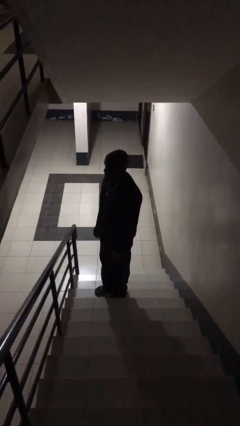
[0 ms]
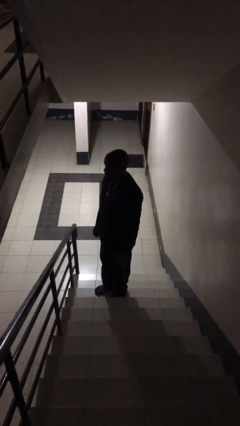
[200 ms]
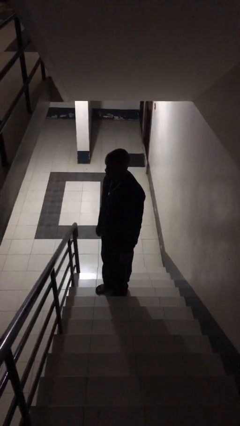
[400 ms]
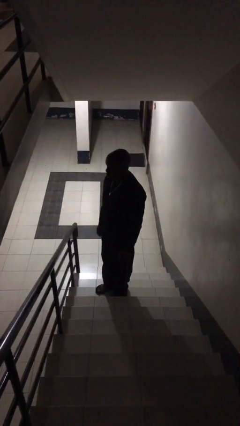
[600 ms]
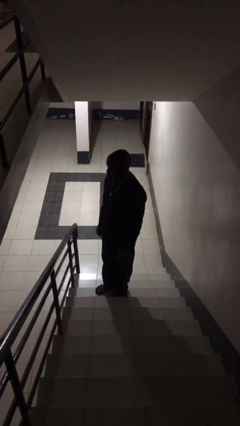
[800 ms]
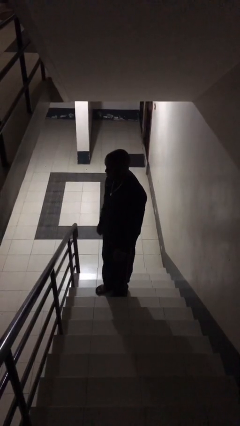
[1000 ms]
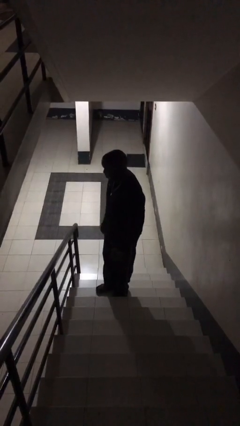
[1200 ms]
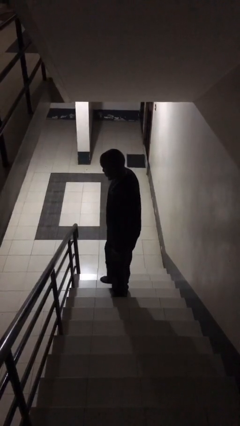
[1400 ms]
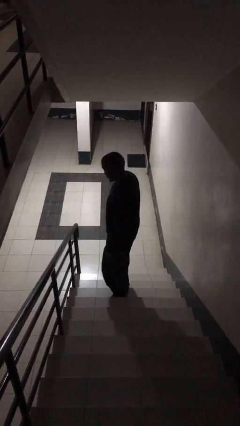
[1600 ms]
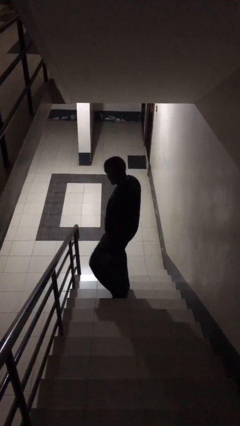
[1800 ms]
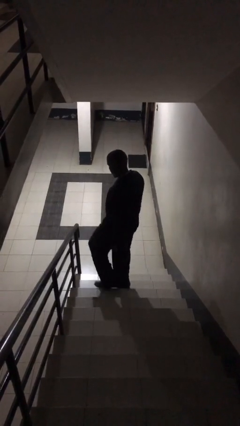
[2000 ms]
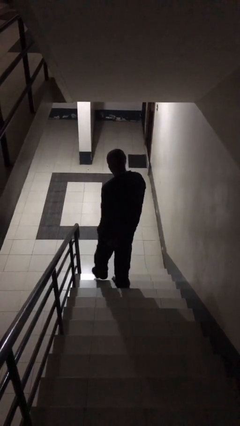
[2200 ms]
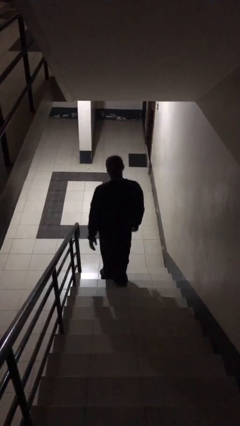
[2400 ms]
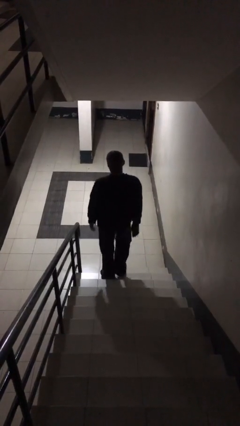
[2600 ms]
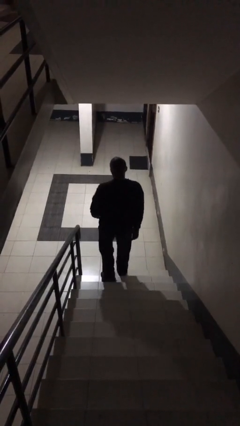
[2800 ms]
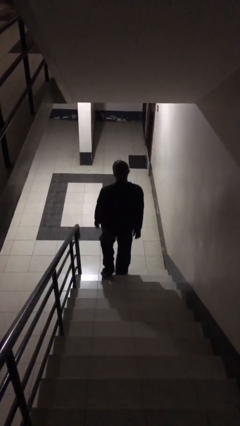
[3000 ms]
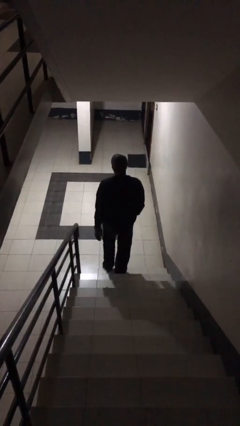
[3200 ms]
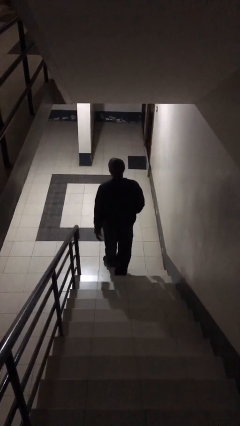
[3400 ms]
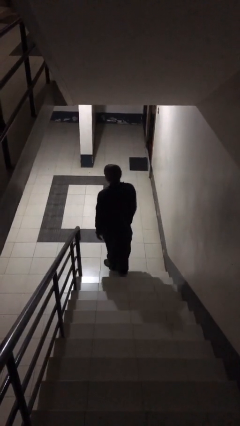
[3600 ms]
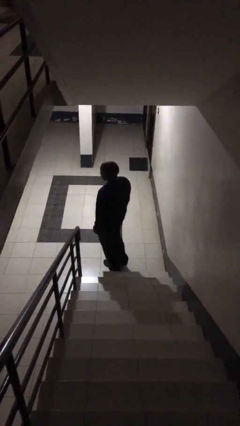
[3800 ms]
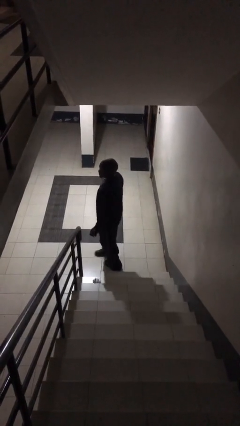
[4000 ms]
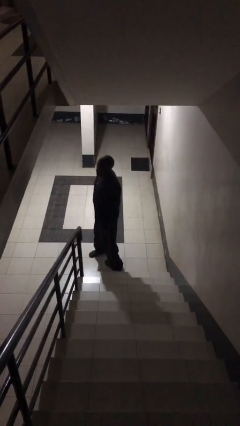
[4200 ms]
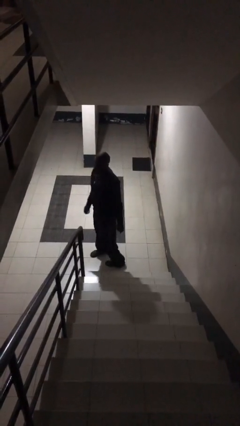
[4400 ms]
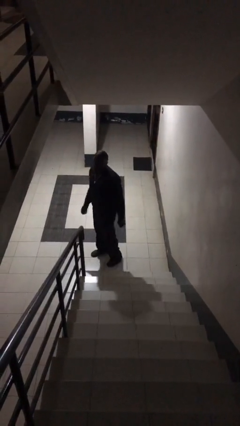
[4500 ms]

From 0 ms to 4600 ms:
person climbs down stairs

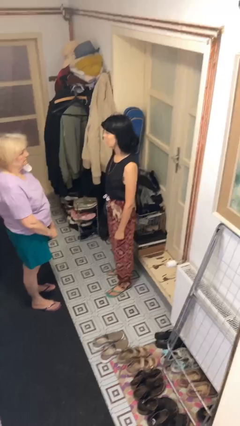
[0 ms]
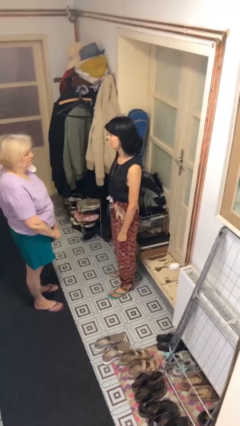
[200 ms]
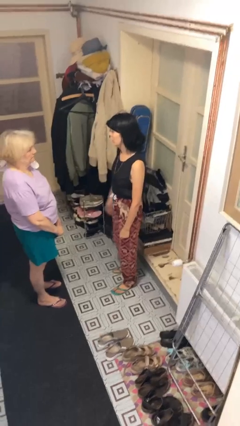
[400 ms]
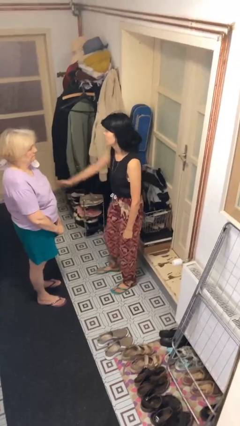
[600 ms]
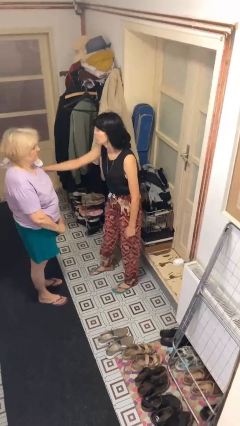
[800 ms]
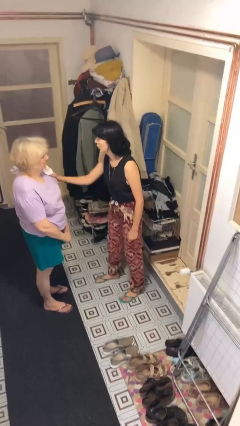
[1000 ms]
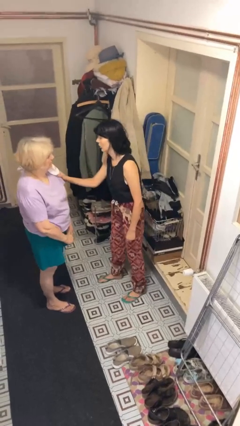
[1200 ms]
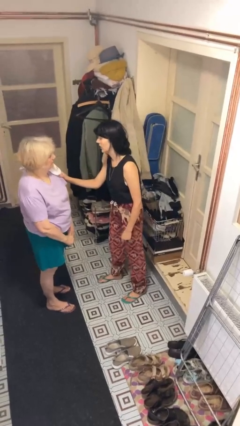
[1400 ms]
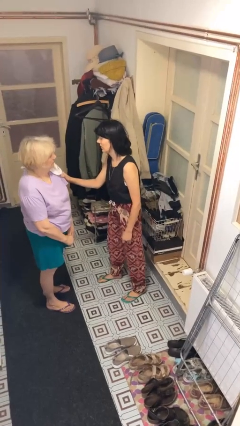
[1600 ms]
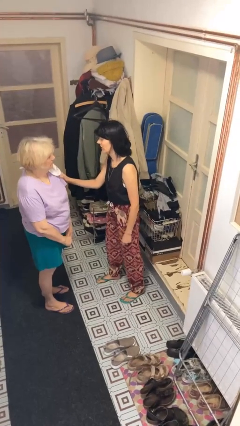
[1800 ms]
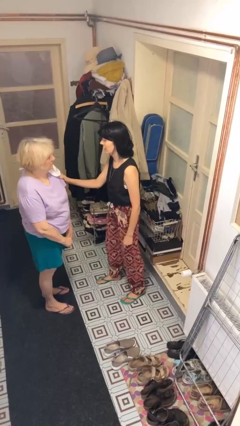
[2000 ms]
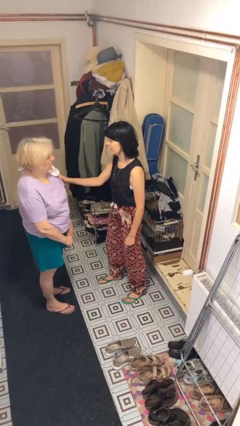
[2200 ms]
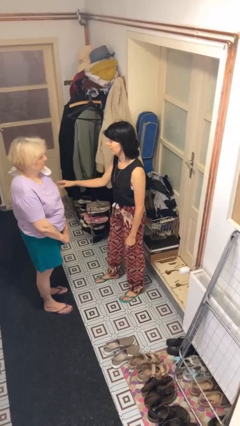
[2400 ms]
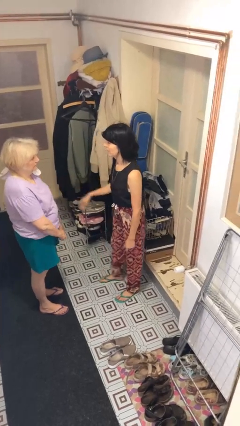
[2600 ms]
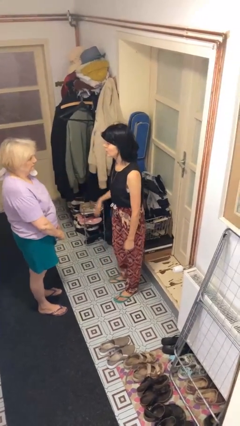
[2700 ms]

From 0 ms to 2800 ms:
person grabs person by bicep

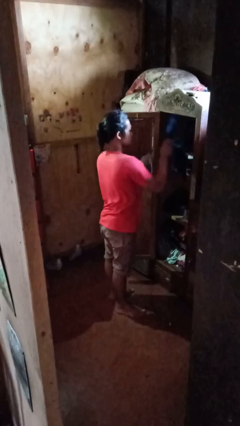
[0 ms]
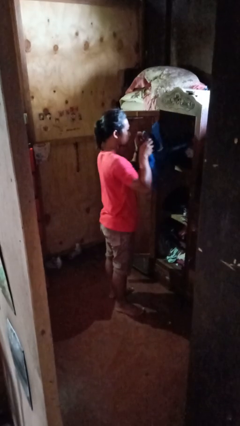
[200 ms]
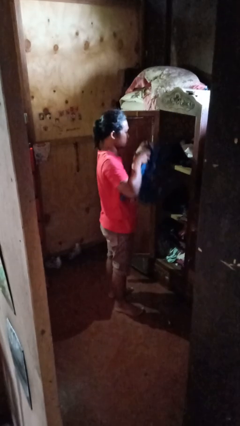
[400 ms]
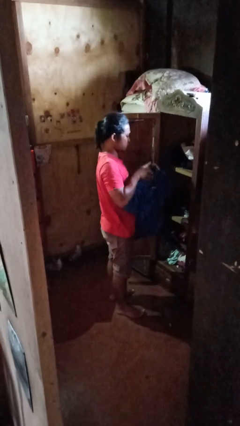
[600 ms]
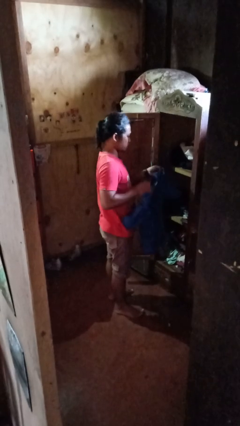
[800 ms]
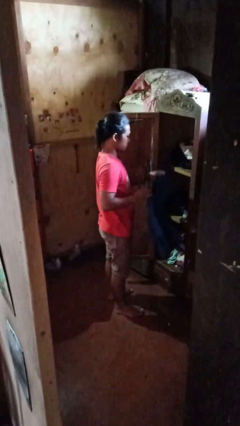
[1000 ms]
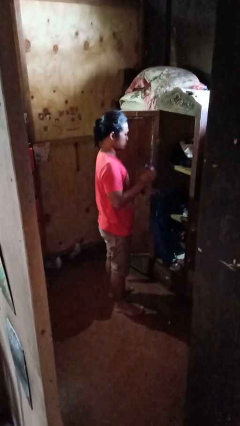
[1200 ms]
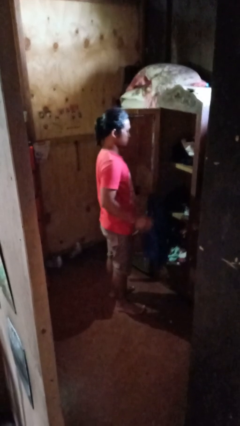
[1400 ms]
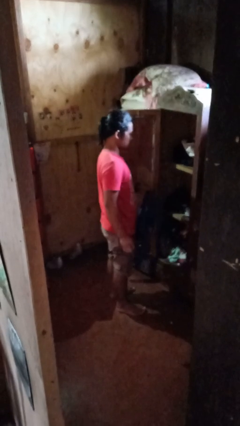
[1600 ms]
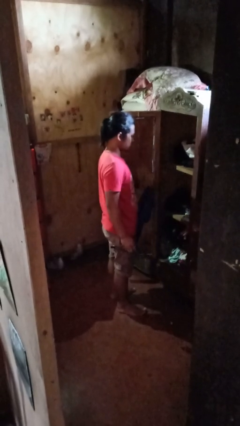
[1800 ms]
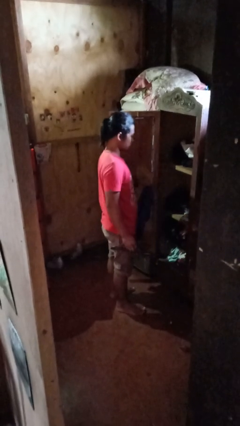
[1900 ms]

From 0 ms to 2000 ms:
person takes clothes from closet

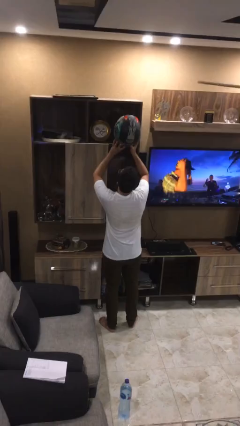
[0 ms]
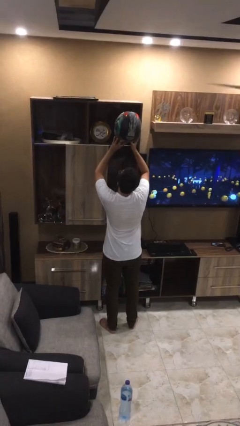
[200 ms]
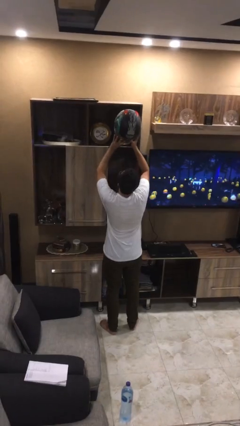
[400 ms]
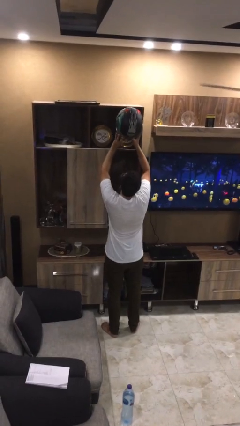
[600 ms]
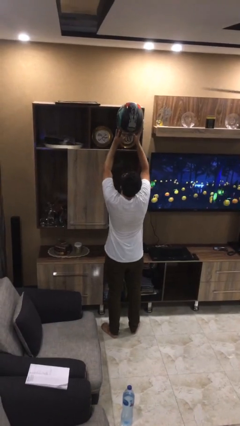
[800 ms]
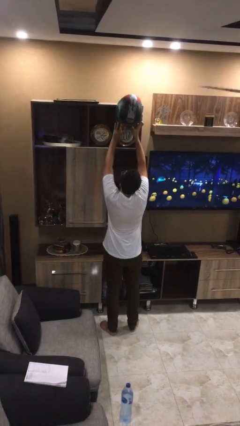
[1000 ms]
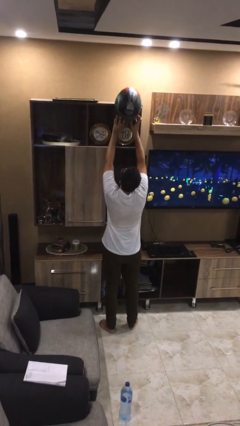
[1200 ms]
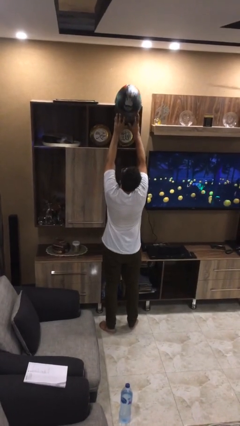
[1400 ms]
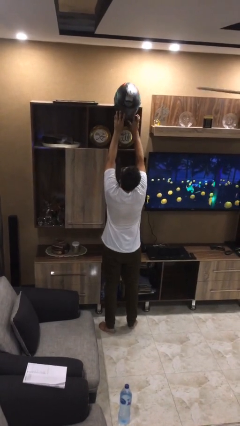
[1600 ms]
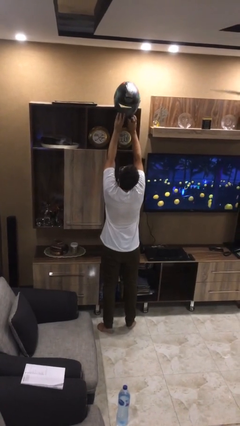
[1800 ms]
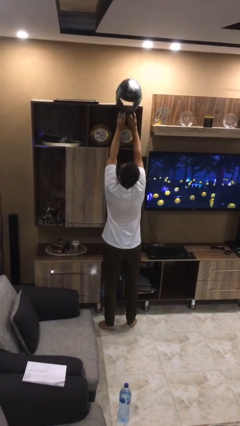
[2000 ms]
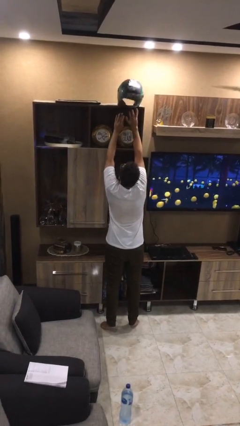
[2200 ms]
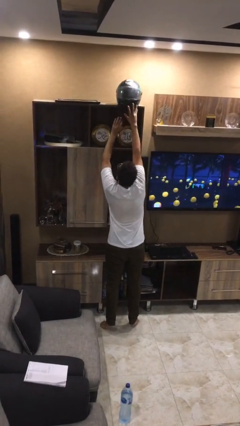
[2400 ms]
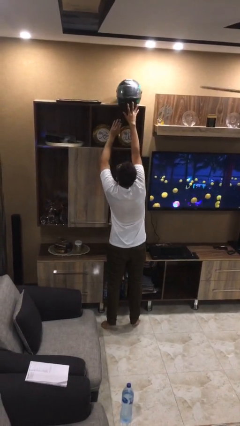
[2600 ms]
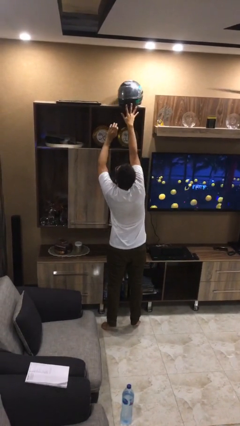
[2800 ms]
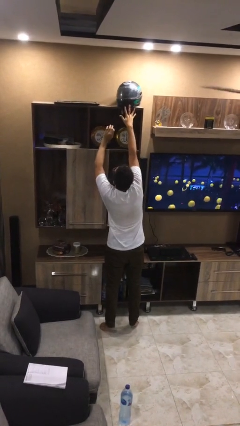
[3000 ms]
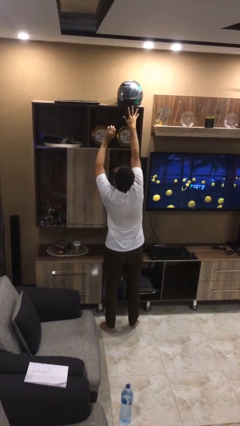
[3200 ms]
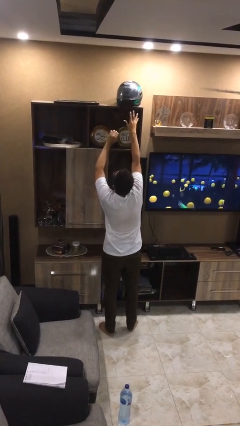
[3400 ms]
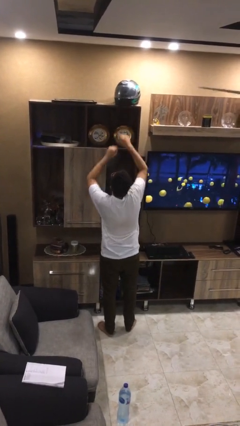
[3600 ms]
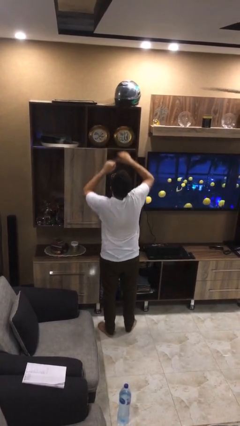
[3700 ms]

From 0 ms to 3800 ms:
person puts down object on shelf

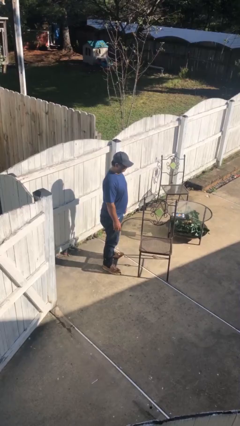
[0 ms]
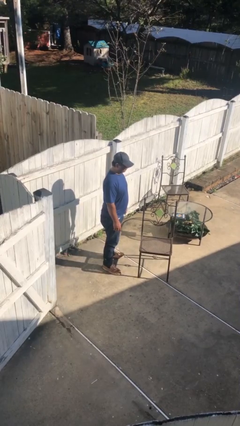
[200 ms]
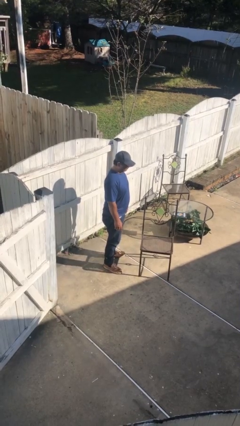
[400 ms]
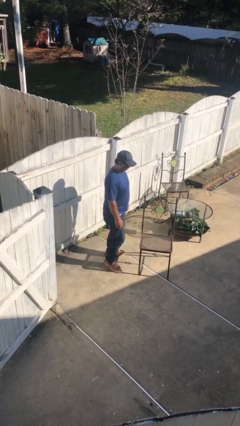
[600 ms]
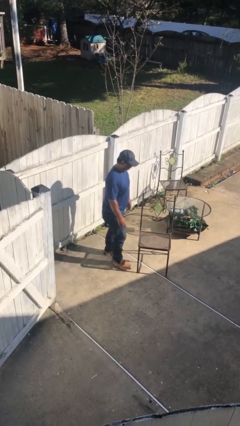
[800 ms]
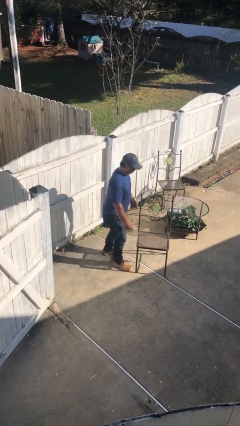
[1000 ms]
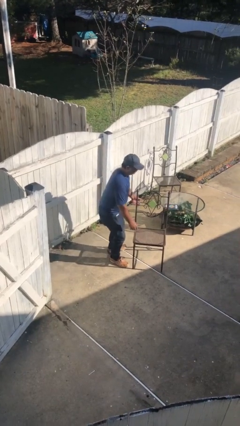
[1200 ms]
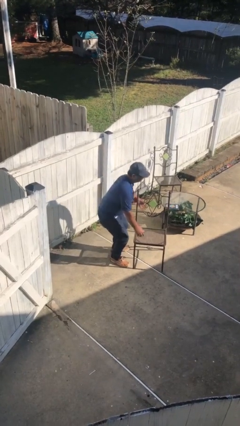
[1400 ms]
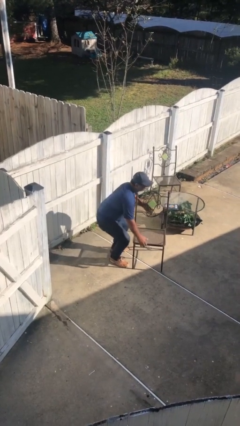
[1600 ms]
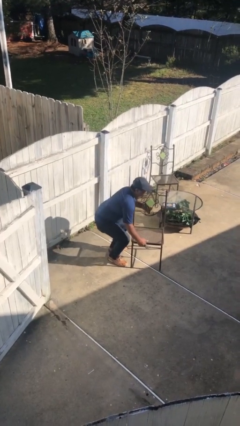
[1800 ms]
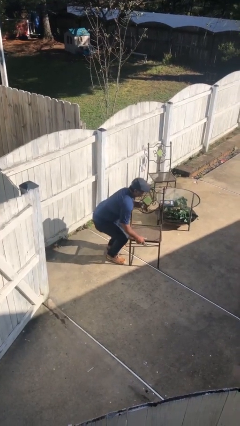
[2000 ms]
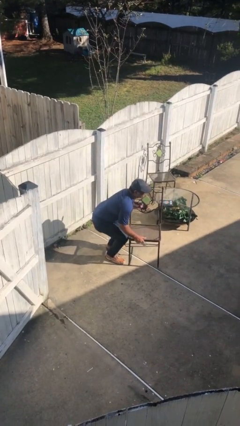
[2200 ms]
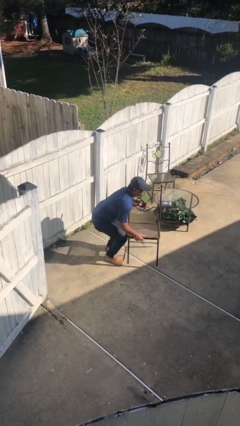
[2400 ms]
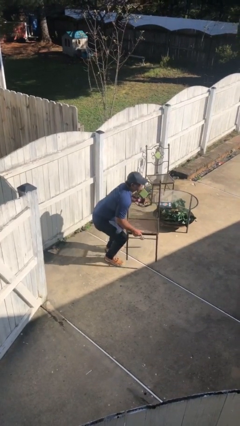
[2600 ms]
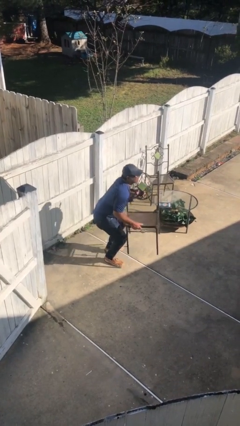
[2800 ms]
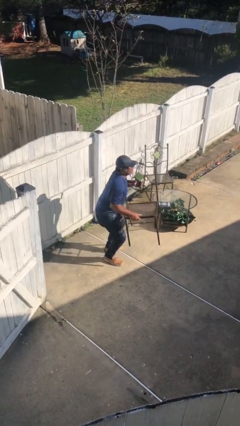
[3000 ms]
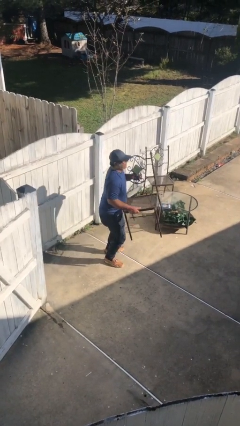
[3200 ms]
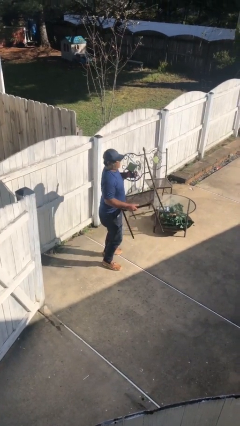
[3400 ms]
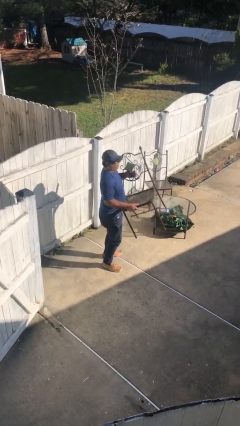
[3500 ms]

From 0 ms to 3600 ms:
person picks up object from floor

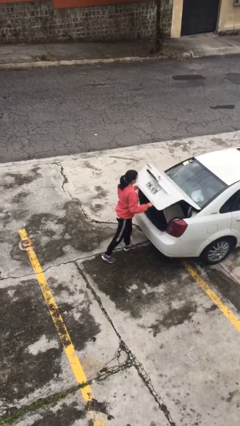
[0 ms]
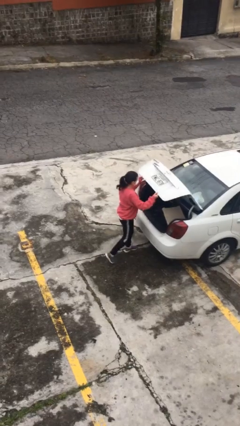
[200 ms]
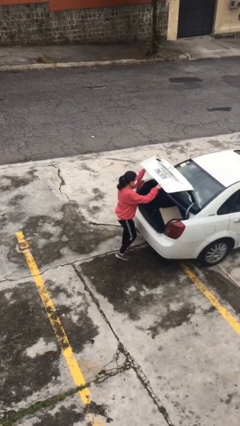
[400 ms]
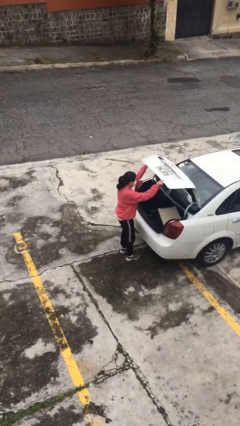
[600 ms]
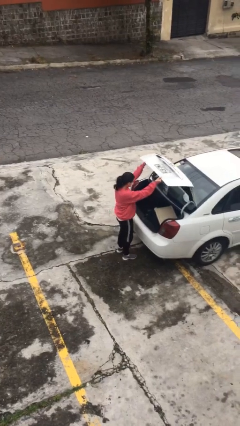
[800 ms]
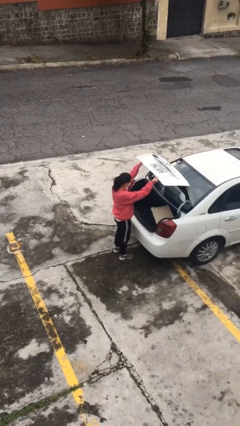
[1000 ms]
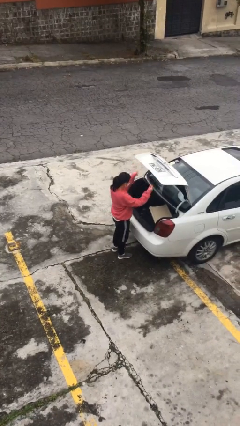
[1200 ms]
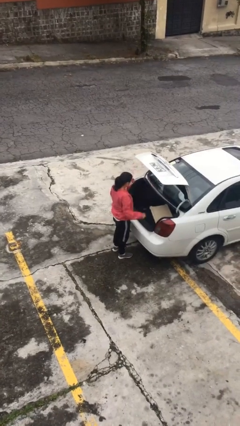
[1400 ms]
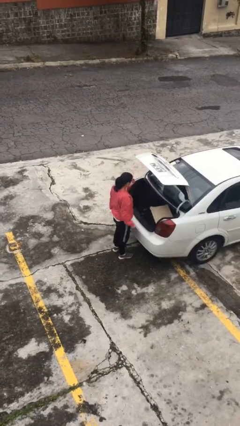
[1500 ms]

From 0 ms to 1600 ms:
person opens car trunk
